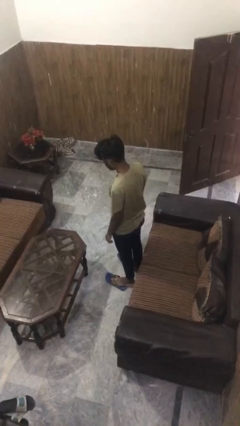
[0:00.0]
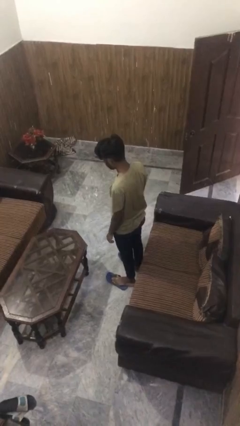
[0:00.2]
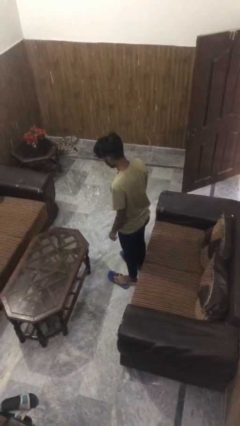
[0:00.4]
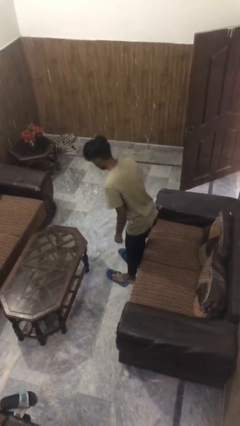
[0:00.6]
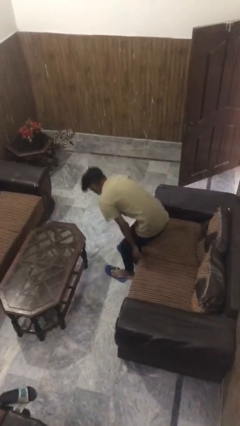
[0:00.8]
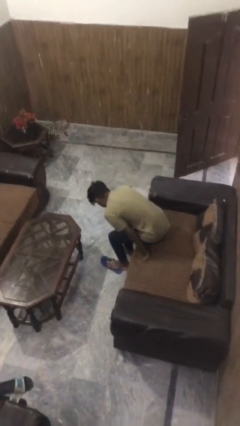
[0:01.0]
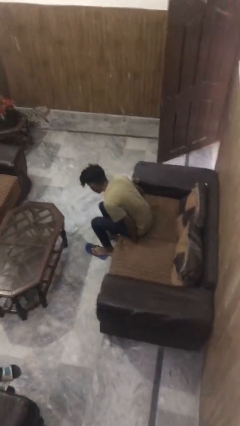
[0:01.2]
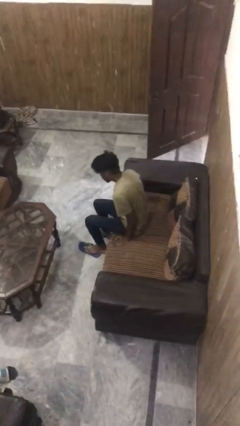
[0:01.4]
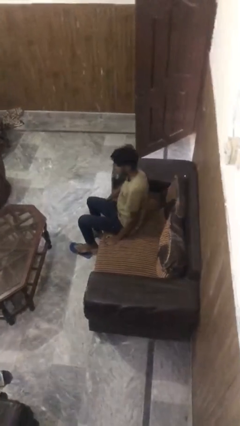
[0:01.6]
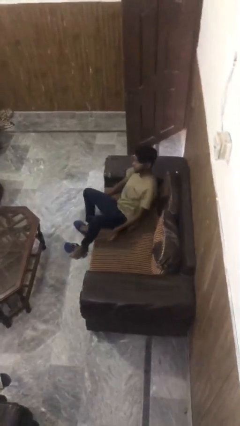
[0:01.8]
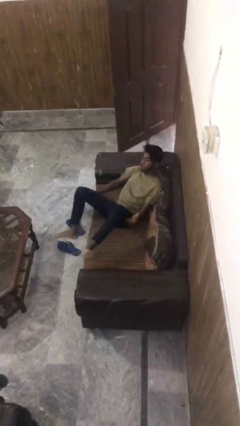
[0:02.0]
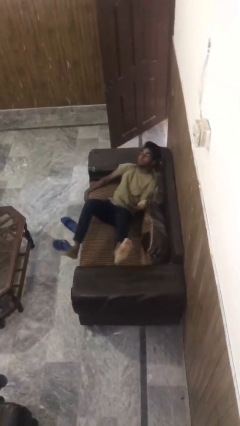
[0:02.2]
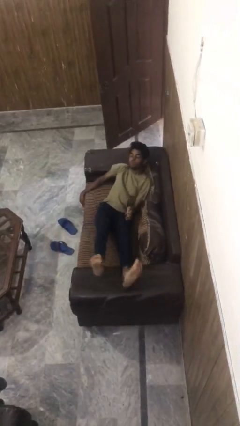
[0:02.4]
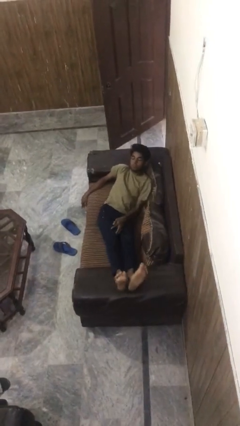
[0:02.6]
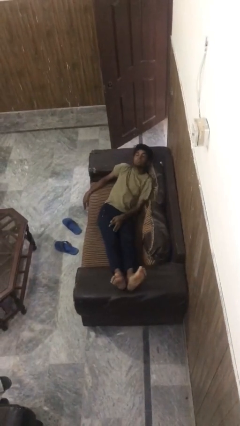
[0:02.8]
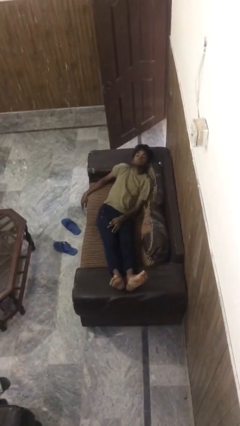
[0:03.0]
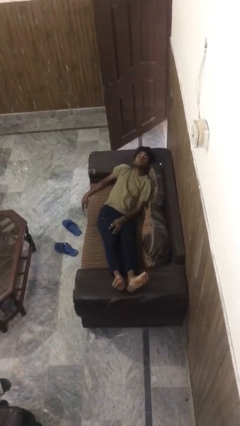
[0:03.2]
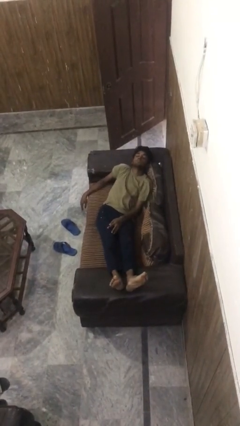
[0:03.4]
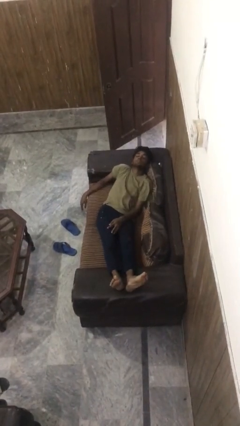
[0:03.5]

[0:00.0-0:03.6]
person lies down on couch

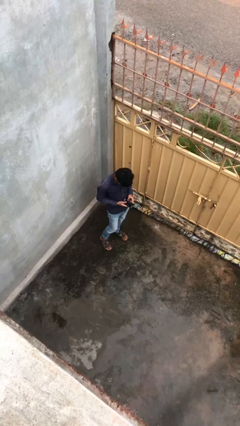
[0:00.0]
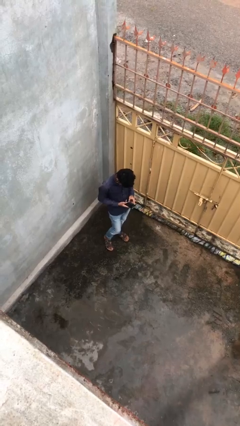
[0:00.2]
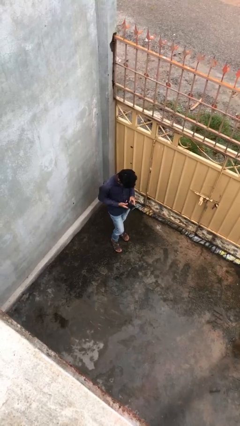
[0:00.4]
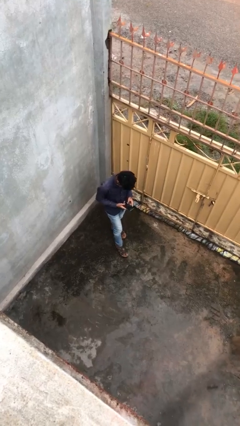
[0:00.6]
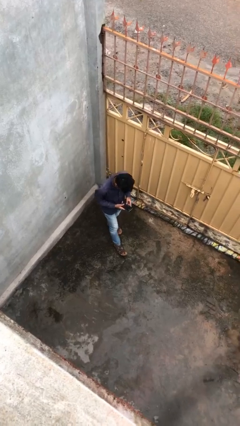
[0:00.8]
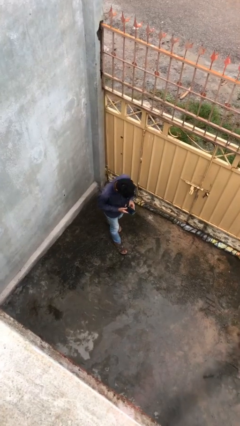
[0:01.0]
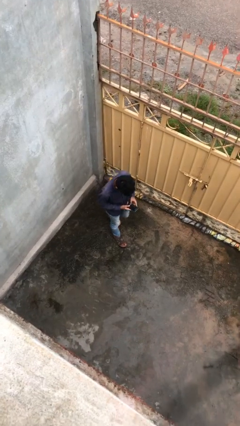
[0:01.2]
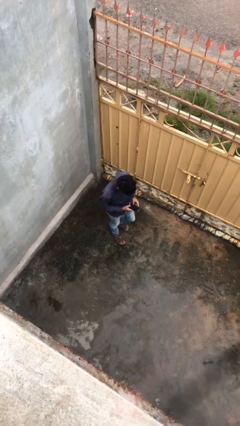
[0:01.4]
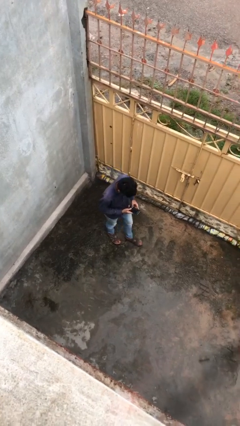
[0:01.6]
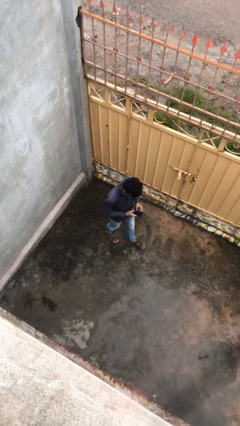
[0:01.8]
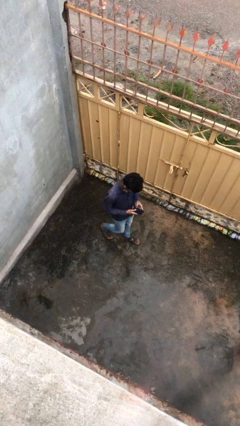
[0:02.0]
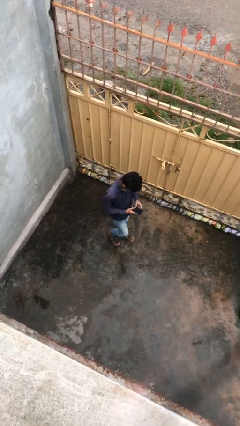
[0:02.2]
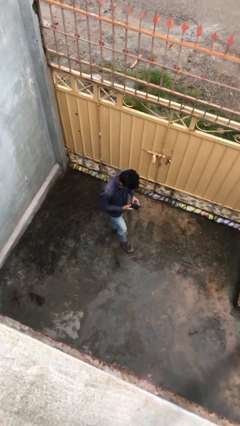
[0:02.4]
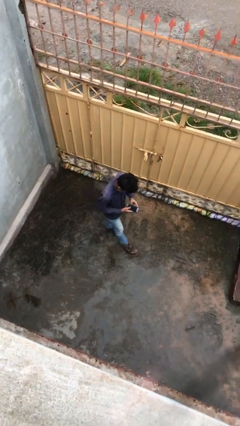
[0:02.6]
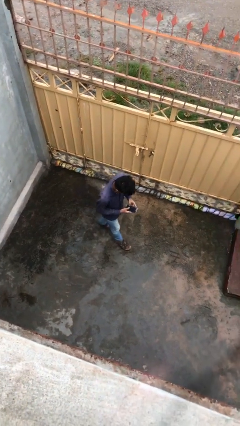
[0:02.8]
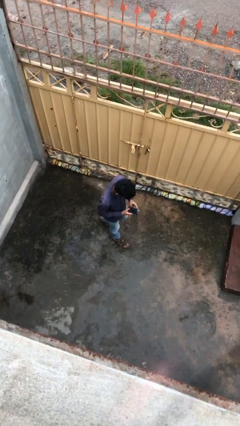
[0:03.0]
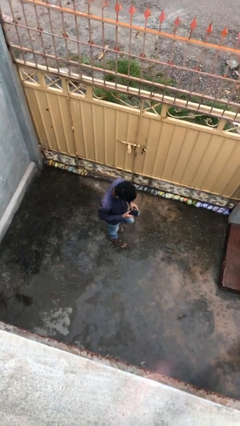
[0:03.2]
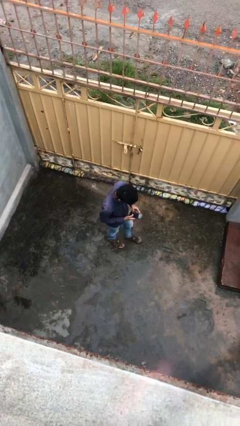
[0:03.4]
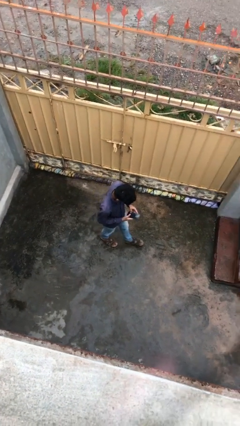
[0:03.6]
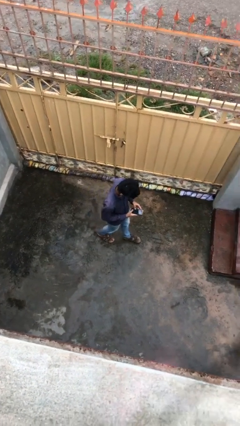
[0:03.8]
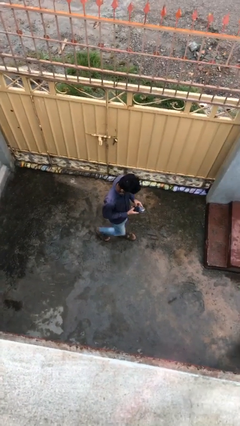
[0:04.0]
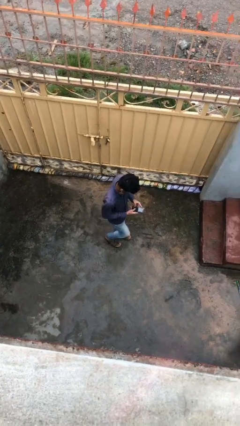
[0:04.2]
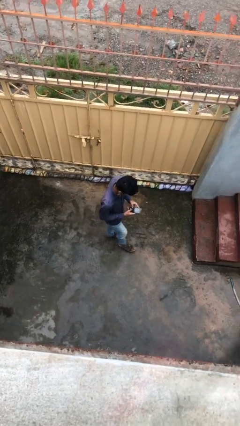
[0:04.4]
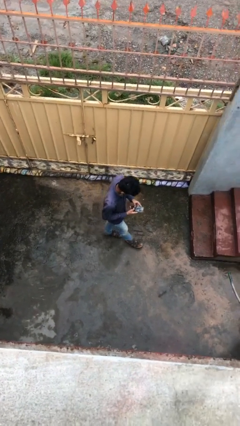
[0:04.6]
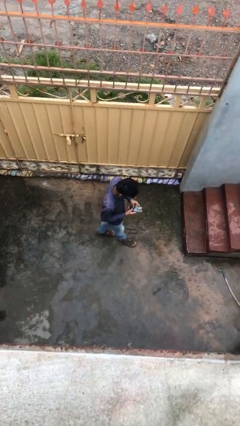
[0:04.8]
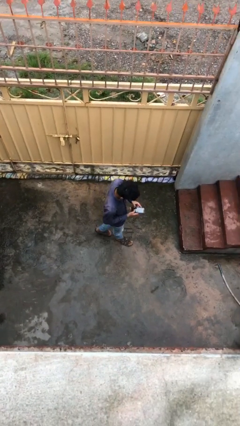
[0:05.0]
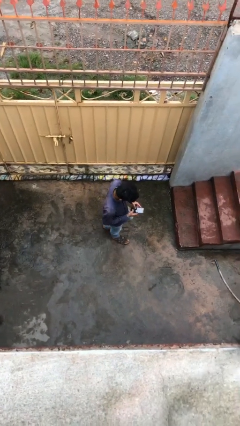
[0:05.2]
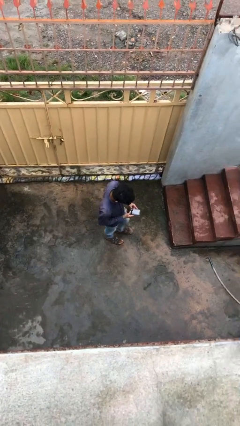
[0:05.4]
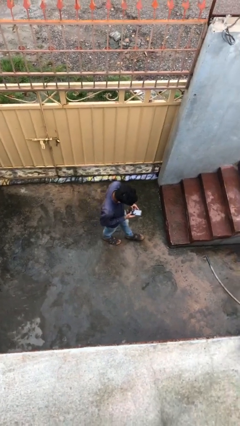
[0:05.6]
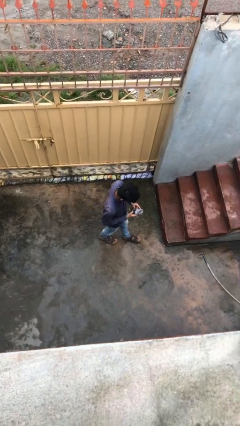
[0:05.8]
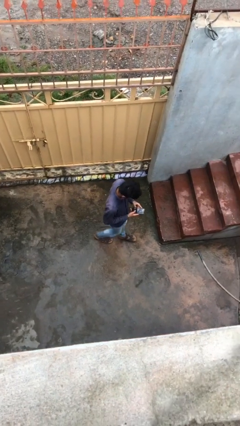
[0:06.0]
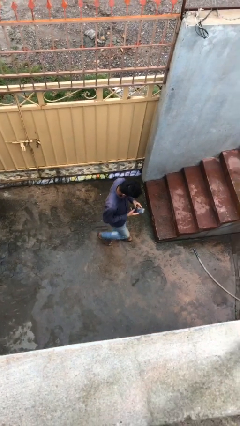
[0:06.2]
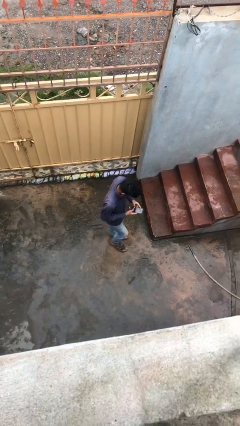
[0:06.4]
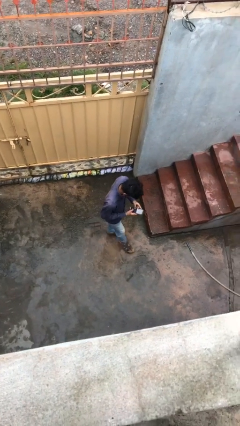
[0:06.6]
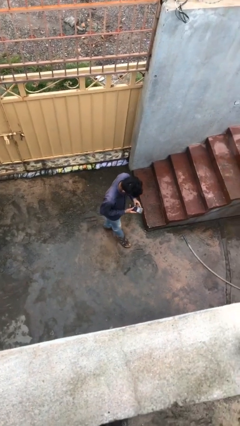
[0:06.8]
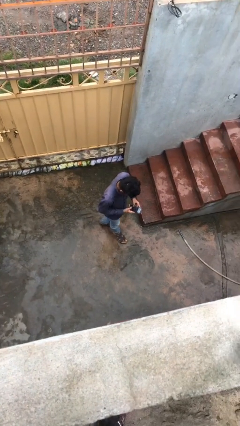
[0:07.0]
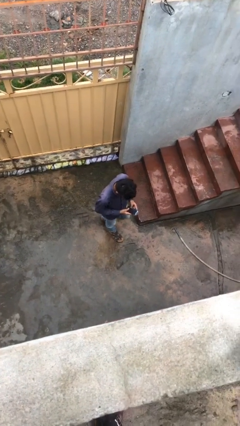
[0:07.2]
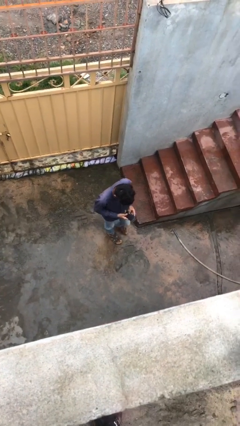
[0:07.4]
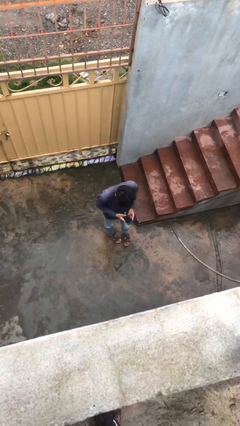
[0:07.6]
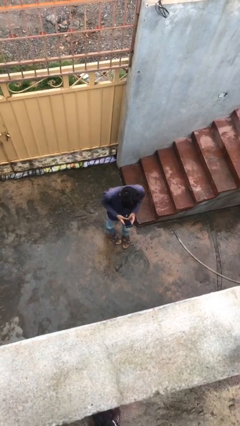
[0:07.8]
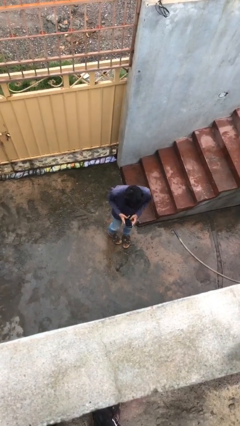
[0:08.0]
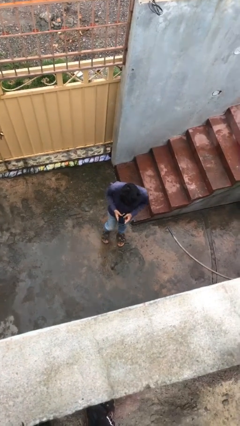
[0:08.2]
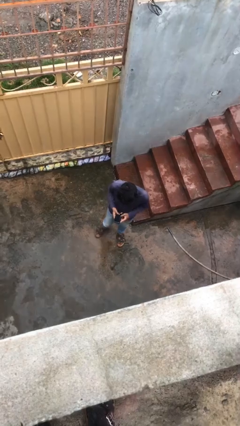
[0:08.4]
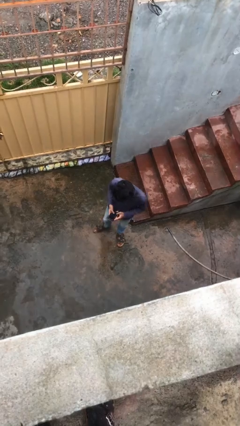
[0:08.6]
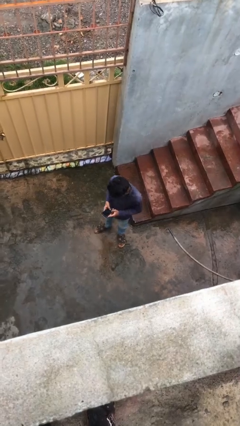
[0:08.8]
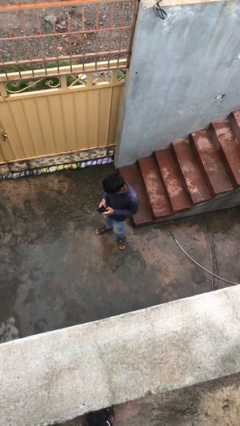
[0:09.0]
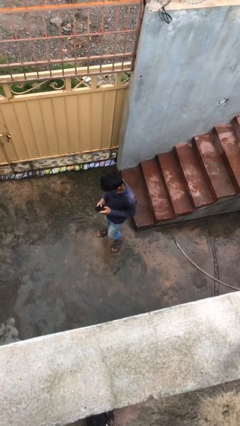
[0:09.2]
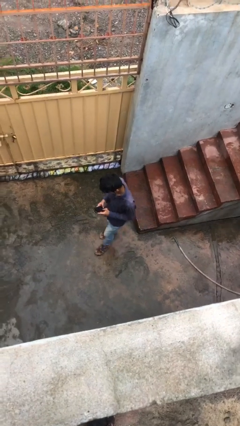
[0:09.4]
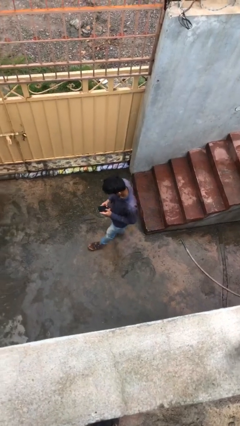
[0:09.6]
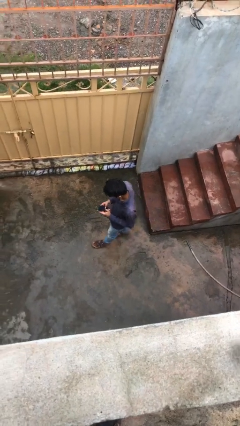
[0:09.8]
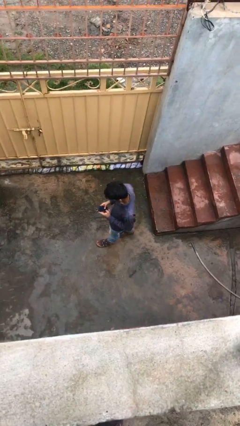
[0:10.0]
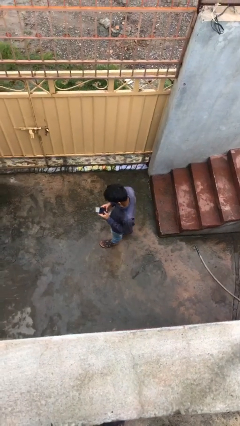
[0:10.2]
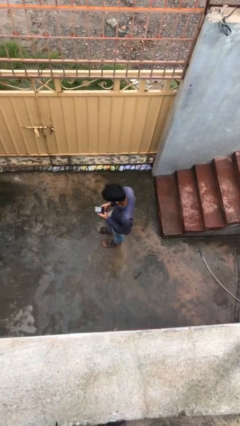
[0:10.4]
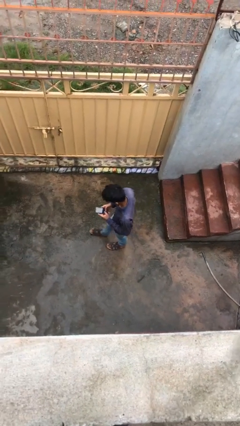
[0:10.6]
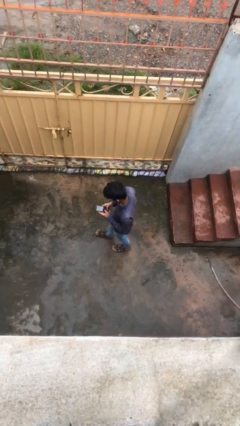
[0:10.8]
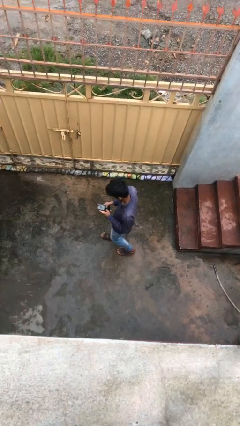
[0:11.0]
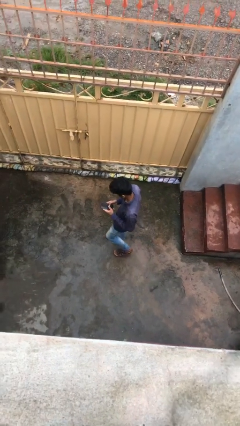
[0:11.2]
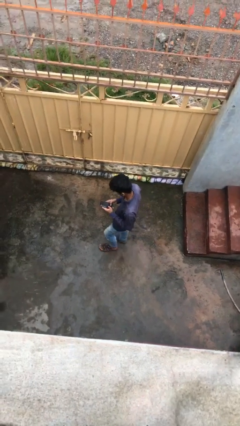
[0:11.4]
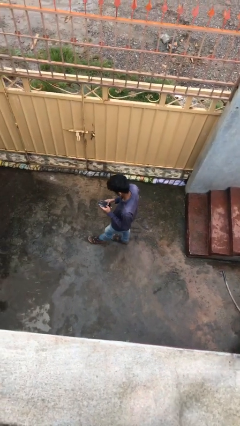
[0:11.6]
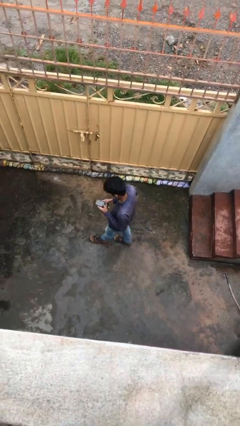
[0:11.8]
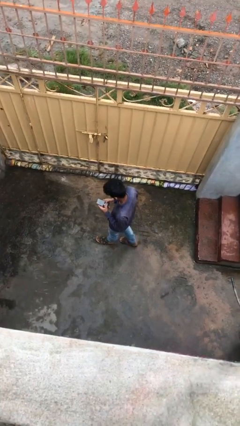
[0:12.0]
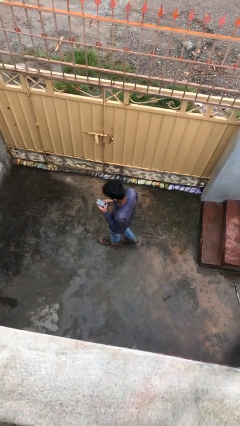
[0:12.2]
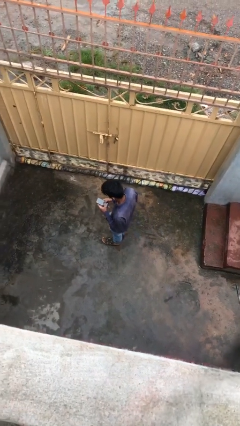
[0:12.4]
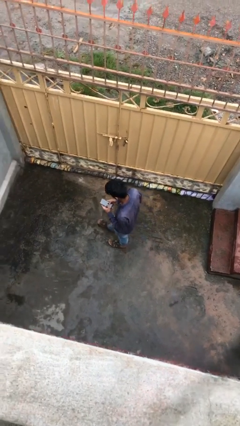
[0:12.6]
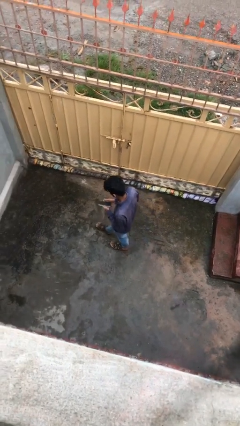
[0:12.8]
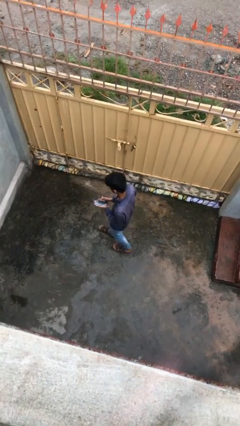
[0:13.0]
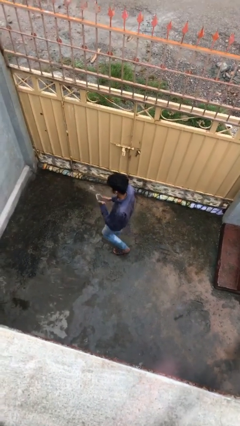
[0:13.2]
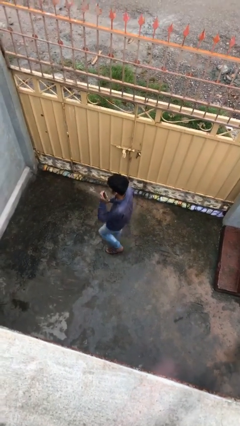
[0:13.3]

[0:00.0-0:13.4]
person texts on phone

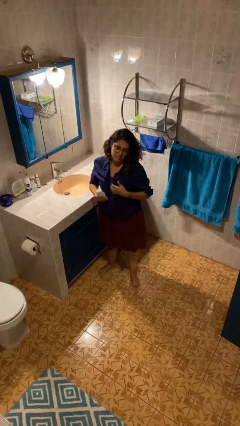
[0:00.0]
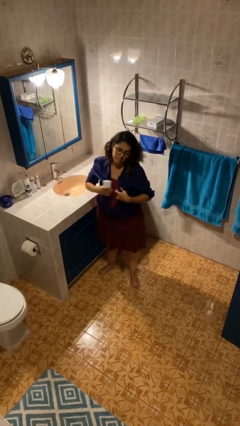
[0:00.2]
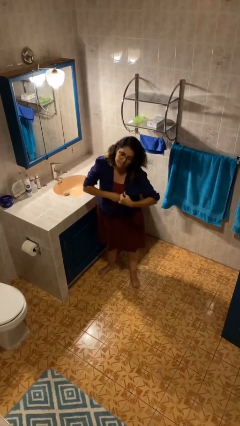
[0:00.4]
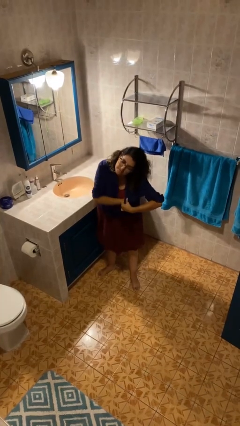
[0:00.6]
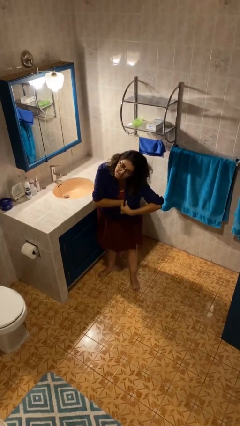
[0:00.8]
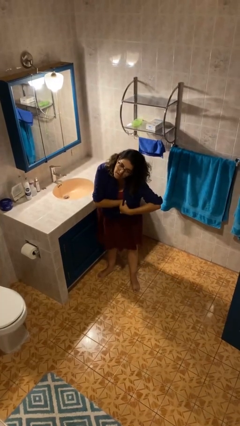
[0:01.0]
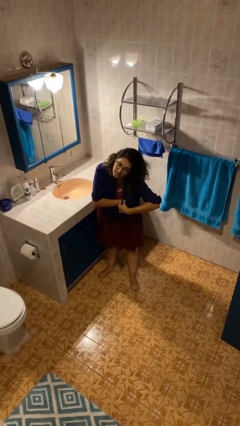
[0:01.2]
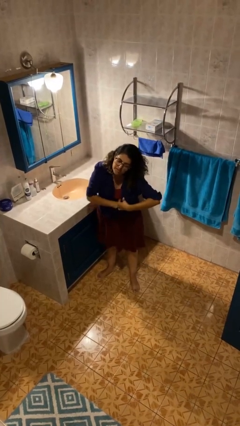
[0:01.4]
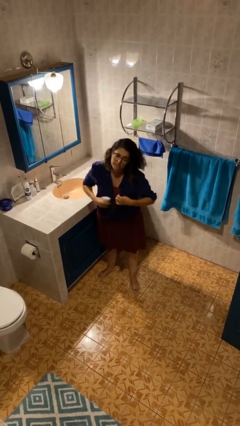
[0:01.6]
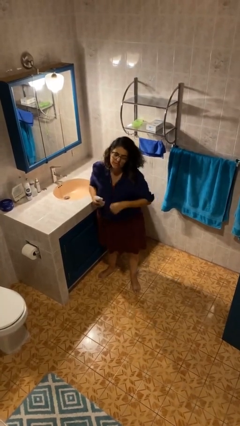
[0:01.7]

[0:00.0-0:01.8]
person applies deodorant
